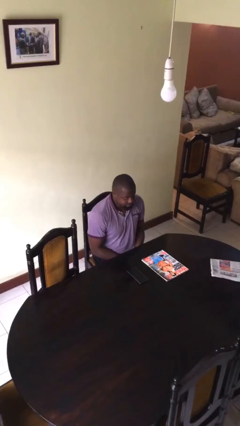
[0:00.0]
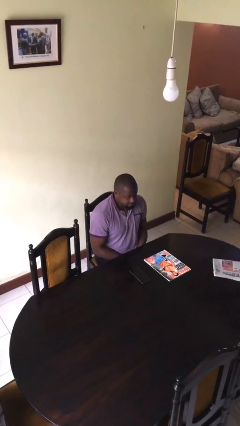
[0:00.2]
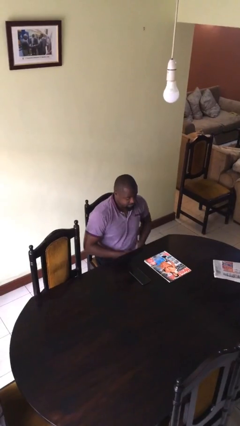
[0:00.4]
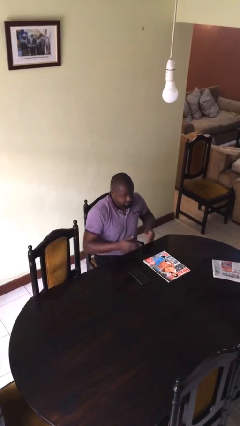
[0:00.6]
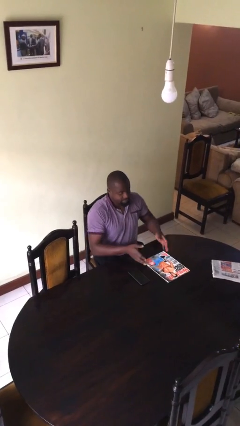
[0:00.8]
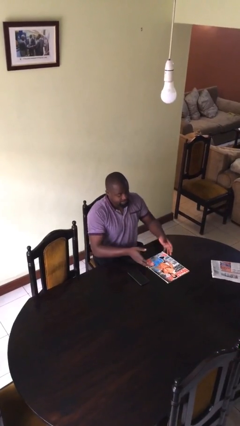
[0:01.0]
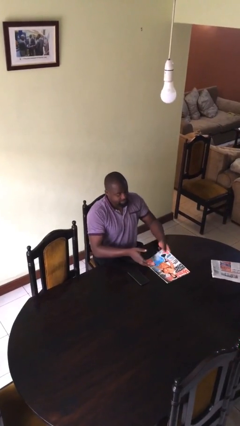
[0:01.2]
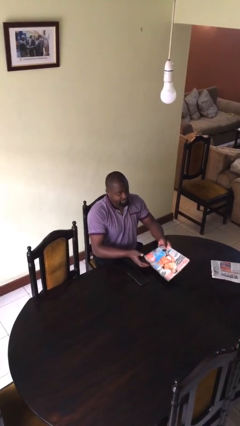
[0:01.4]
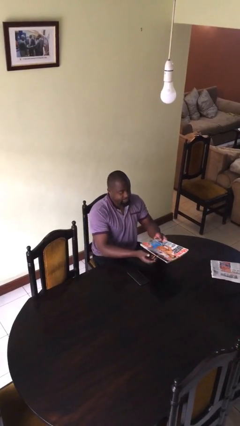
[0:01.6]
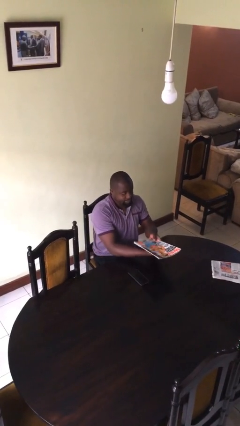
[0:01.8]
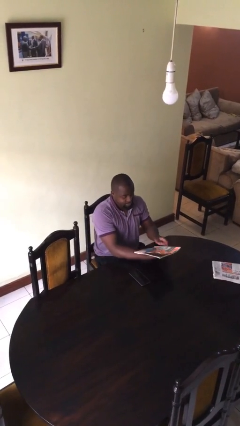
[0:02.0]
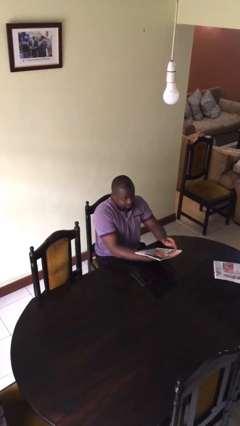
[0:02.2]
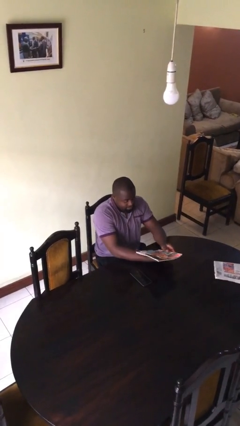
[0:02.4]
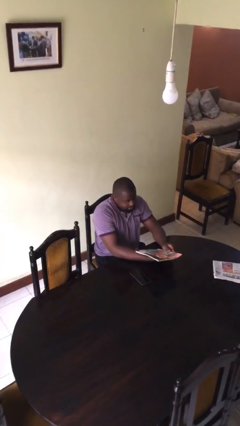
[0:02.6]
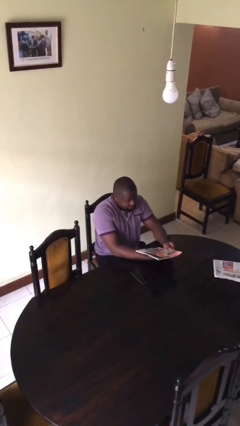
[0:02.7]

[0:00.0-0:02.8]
person picks up object from table

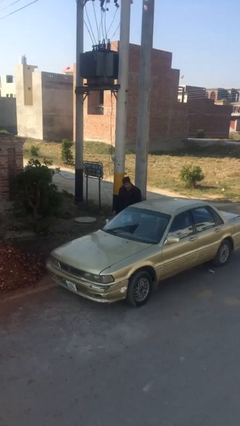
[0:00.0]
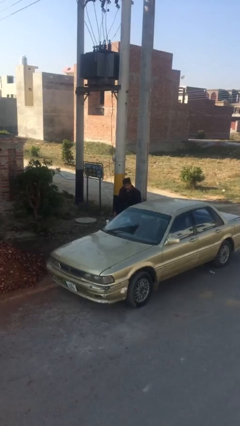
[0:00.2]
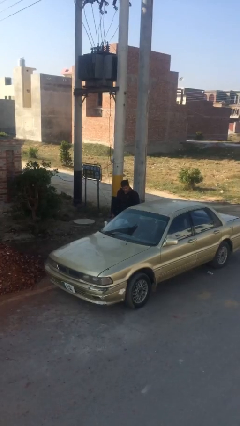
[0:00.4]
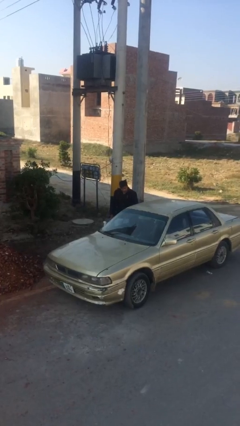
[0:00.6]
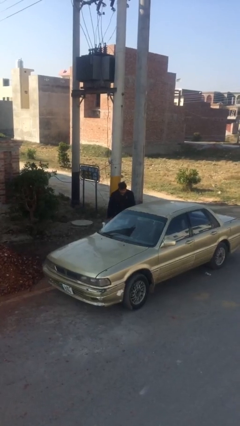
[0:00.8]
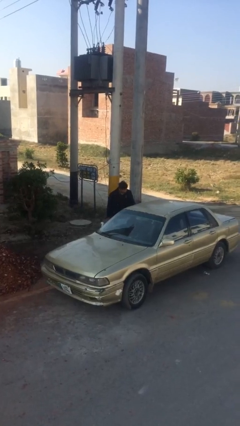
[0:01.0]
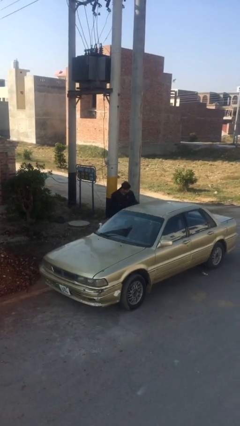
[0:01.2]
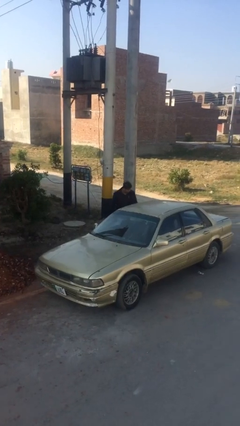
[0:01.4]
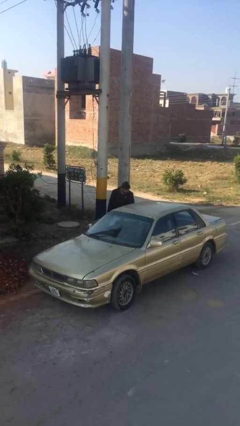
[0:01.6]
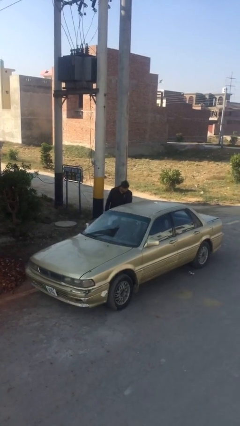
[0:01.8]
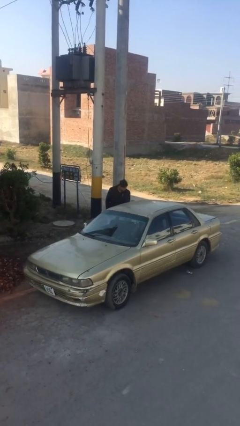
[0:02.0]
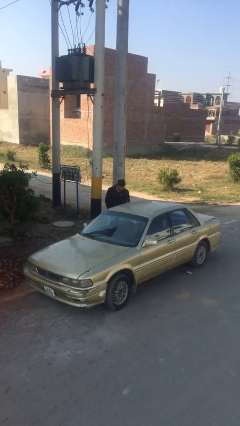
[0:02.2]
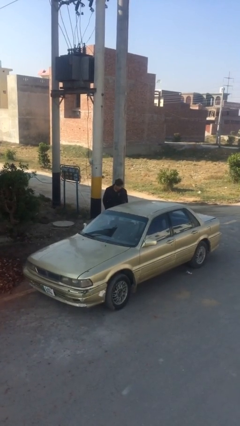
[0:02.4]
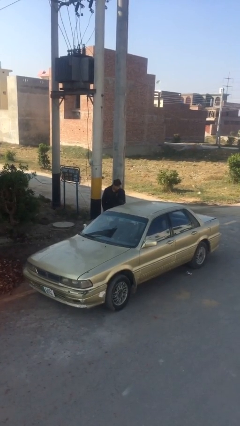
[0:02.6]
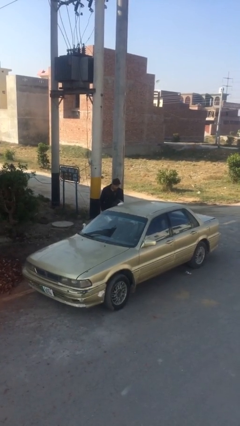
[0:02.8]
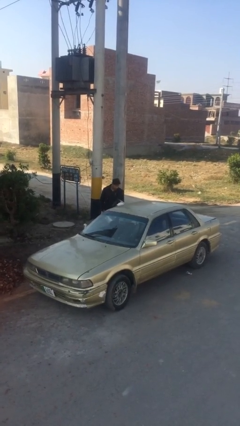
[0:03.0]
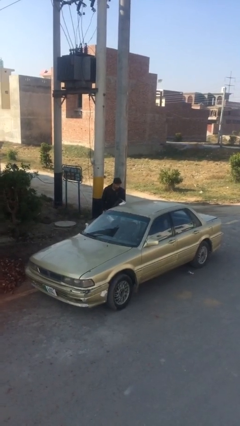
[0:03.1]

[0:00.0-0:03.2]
person opens car door

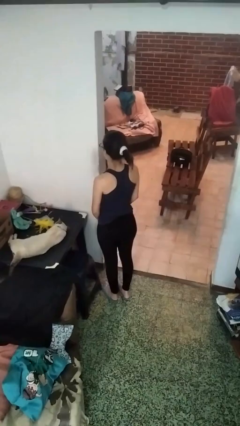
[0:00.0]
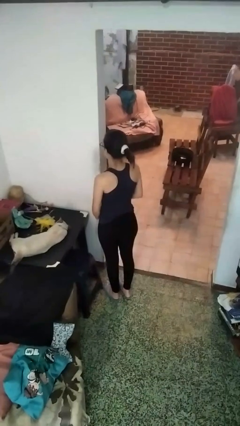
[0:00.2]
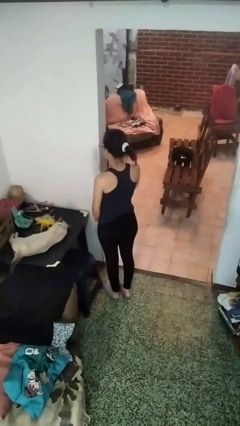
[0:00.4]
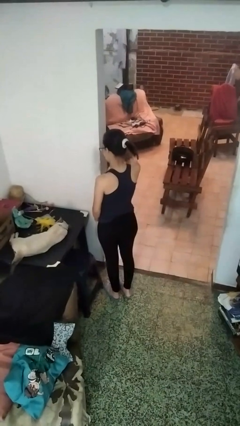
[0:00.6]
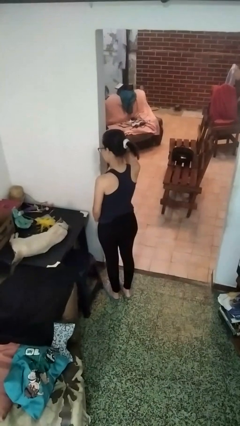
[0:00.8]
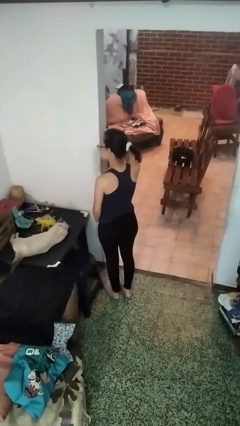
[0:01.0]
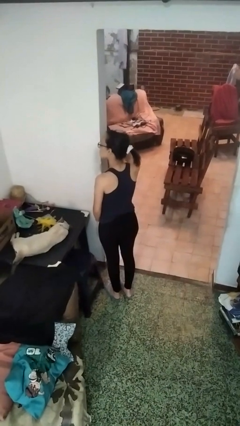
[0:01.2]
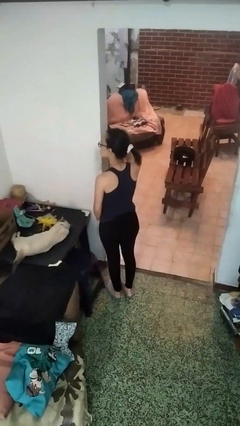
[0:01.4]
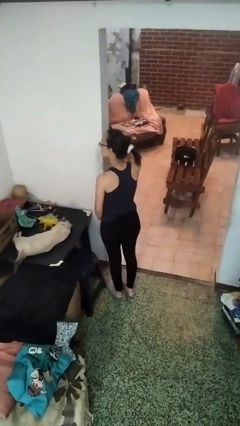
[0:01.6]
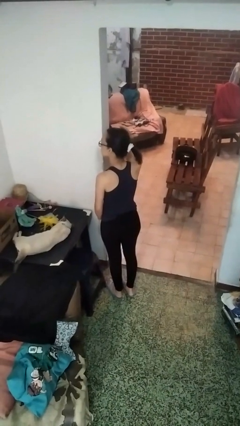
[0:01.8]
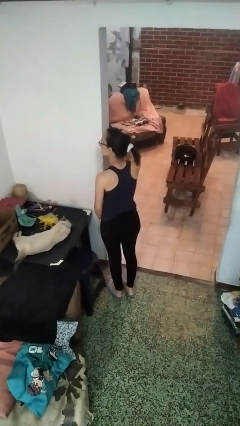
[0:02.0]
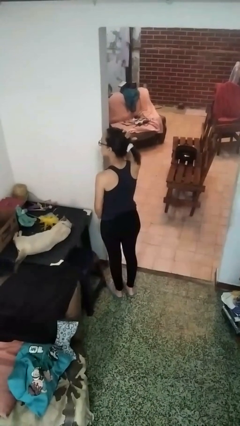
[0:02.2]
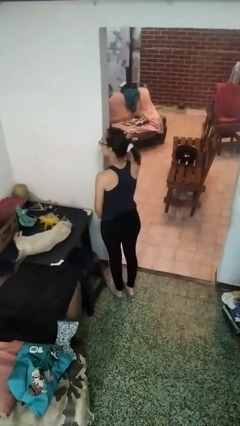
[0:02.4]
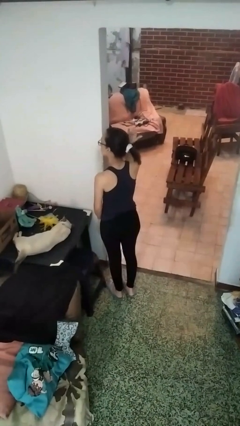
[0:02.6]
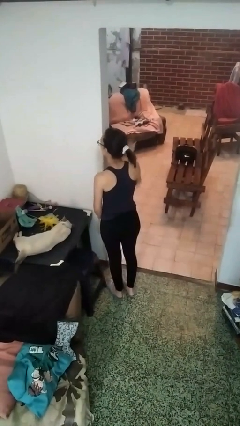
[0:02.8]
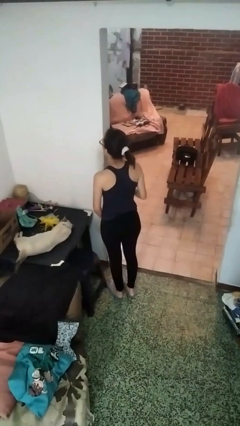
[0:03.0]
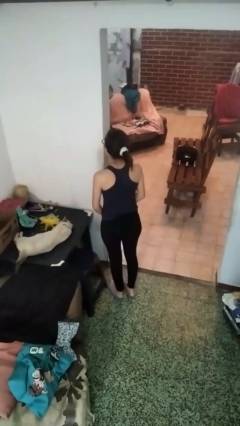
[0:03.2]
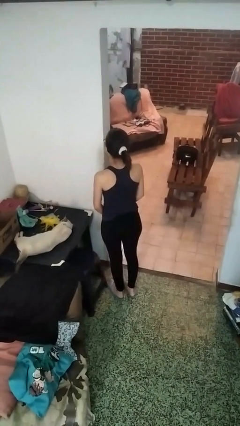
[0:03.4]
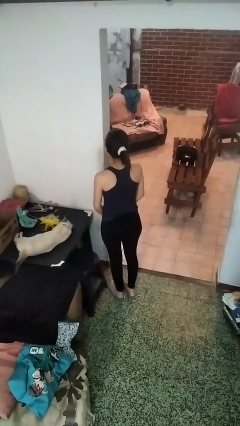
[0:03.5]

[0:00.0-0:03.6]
person pats head

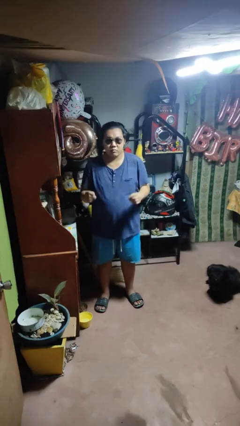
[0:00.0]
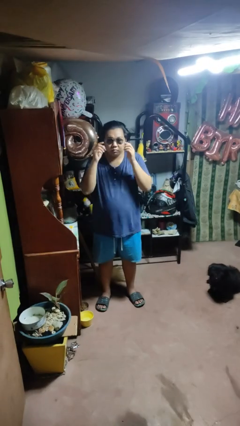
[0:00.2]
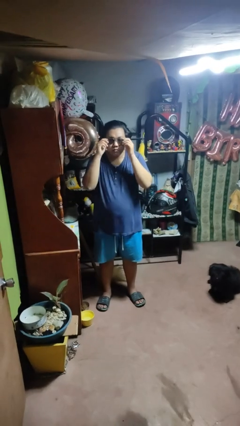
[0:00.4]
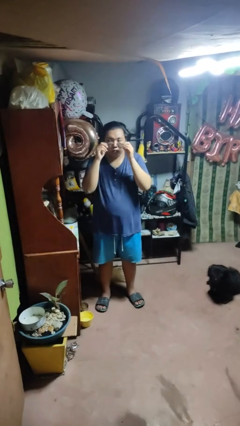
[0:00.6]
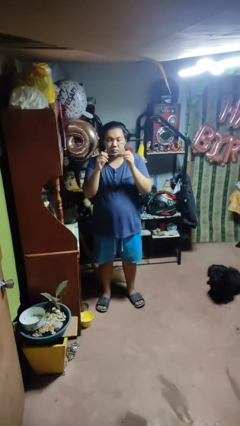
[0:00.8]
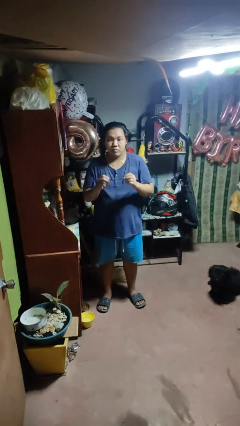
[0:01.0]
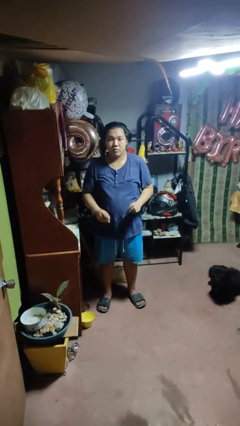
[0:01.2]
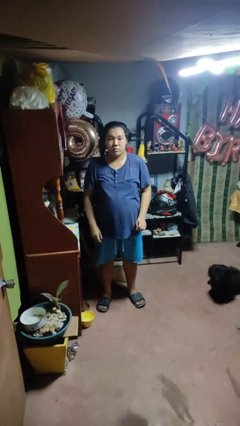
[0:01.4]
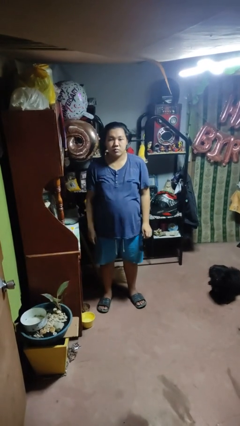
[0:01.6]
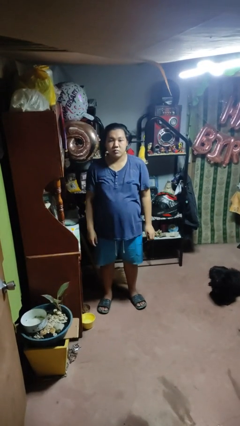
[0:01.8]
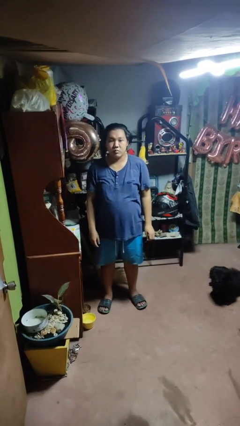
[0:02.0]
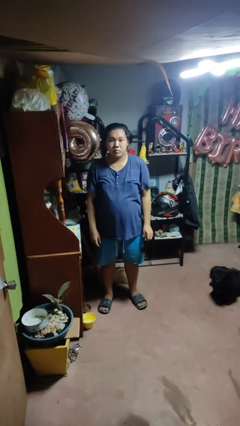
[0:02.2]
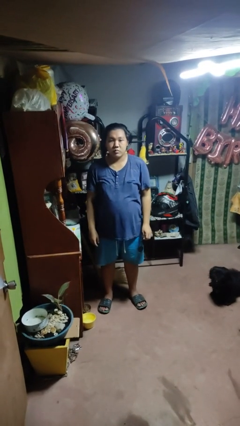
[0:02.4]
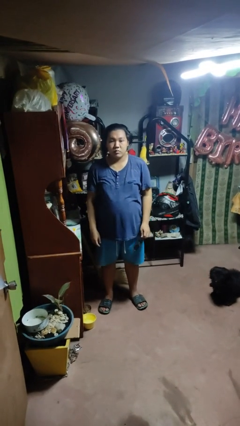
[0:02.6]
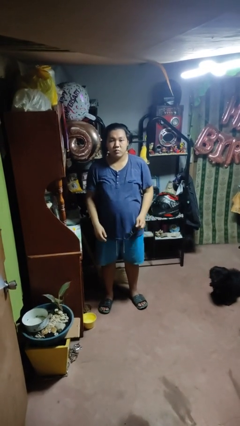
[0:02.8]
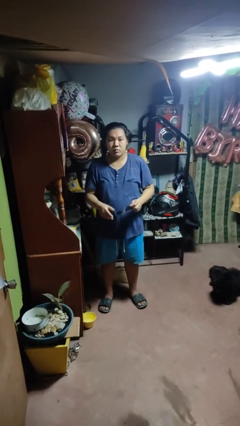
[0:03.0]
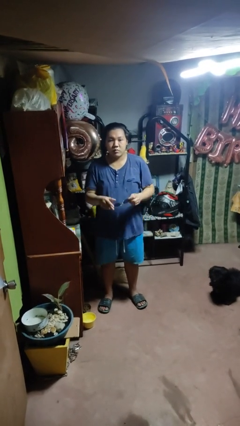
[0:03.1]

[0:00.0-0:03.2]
person takes off sunglasses

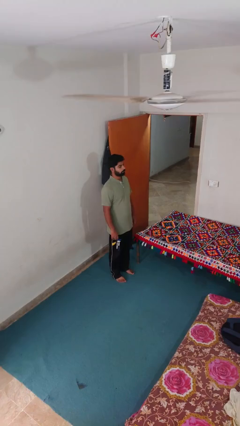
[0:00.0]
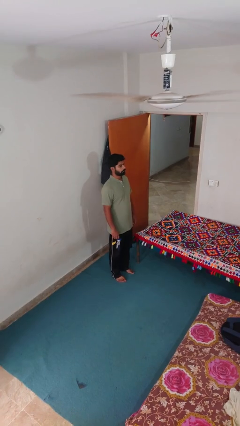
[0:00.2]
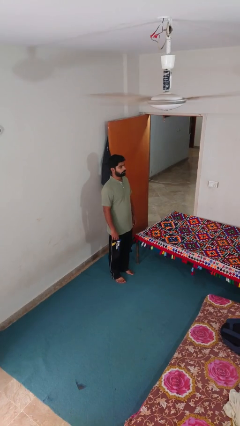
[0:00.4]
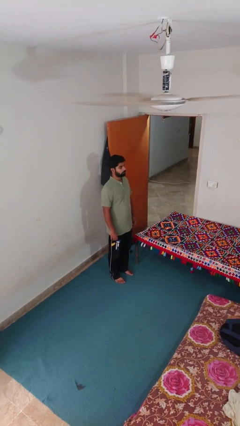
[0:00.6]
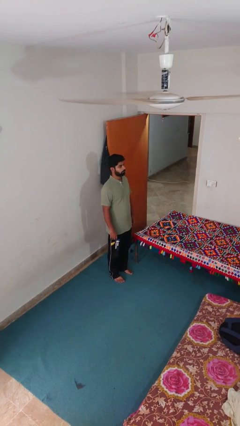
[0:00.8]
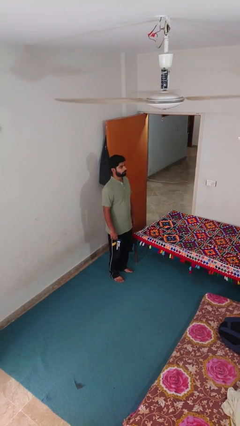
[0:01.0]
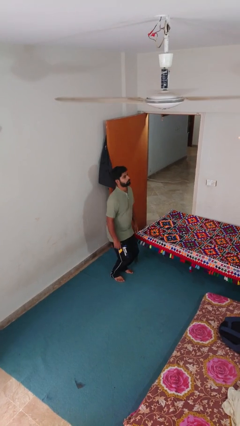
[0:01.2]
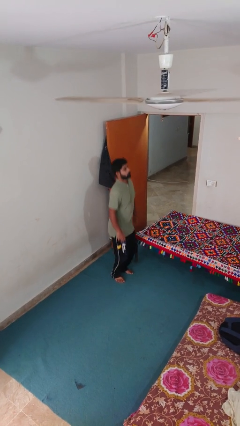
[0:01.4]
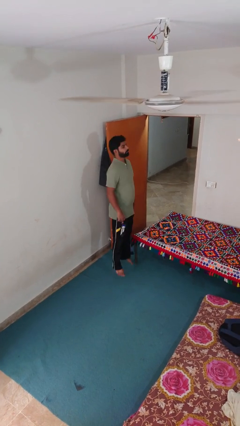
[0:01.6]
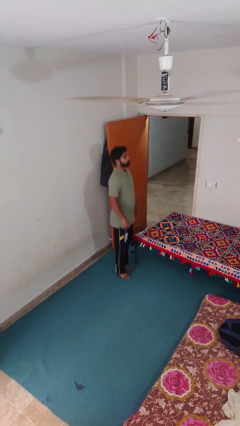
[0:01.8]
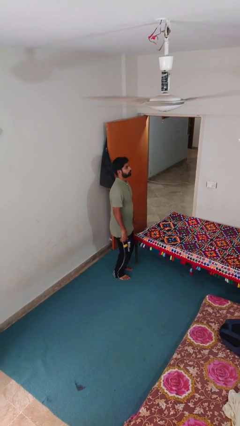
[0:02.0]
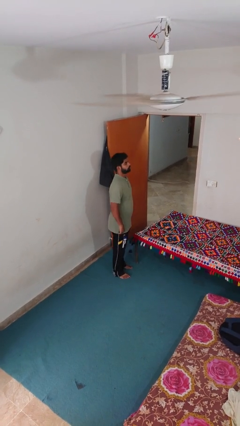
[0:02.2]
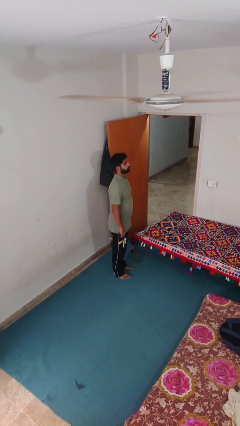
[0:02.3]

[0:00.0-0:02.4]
person jumps

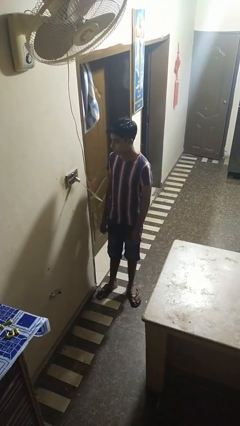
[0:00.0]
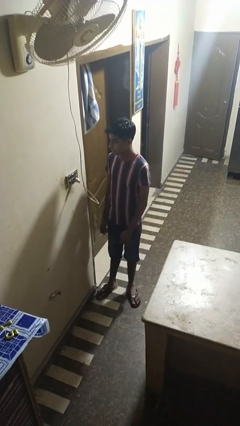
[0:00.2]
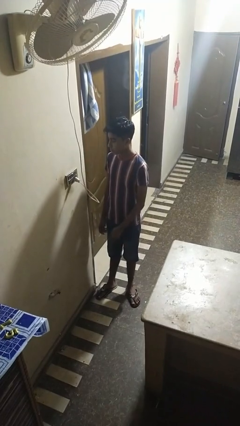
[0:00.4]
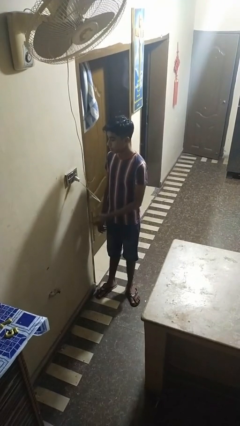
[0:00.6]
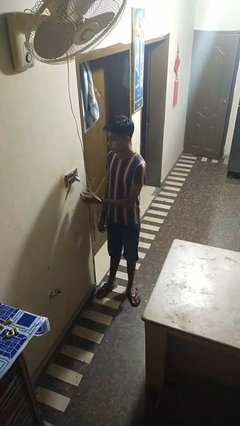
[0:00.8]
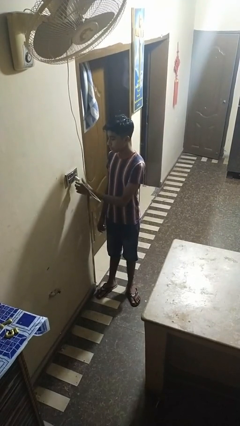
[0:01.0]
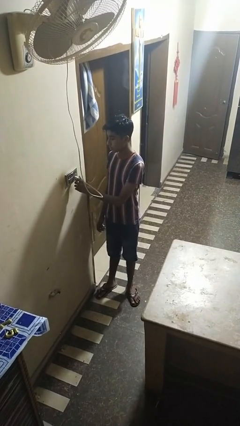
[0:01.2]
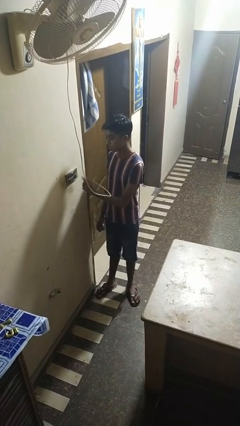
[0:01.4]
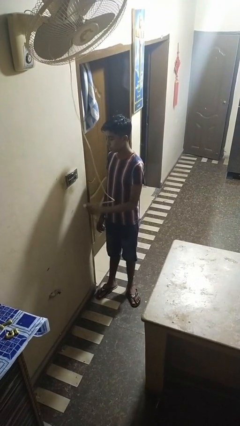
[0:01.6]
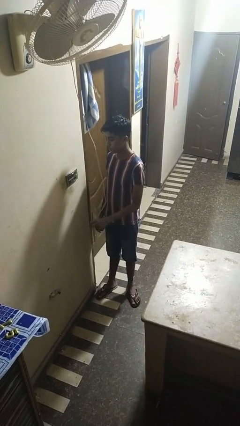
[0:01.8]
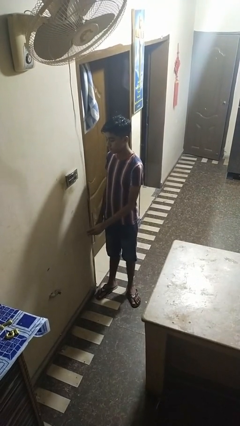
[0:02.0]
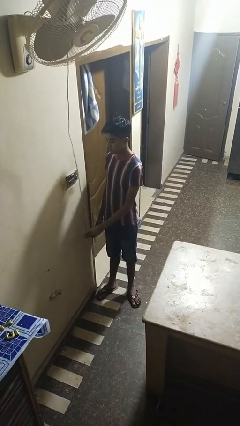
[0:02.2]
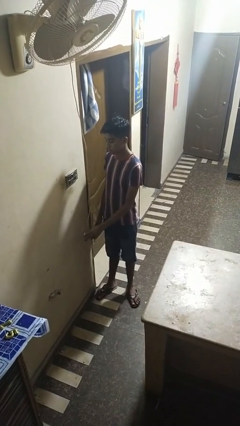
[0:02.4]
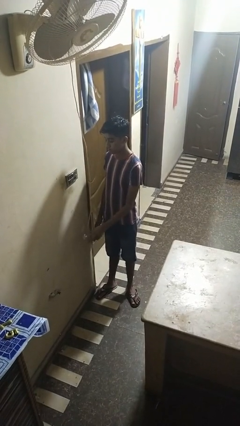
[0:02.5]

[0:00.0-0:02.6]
person unplugs from electrical socket
